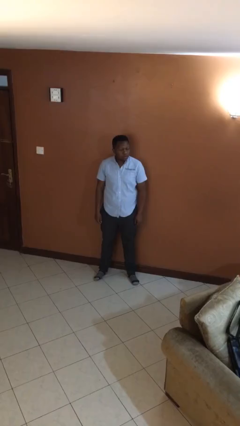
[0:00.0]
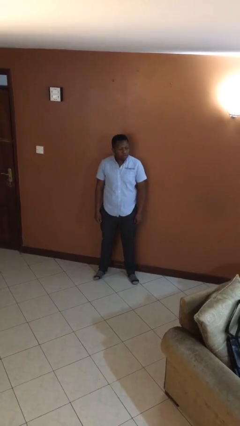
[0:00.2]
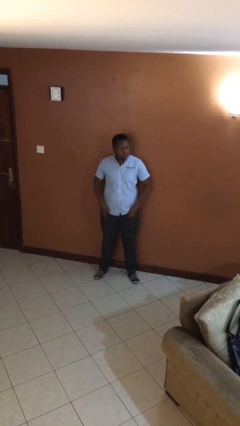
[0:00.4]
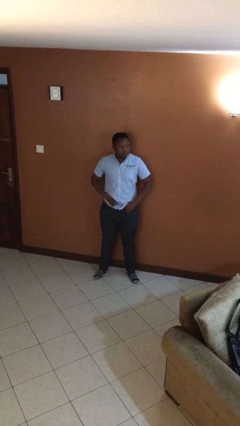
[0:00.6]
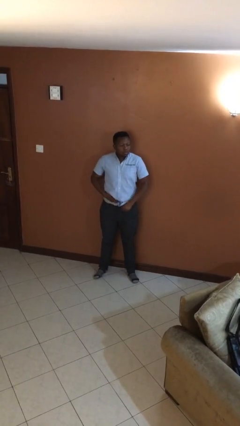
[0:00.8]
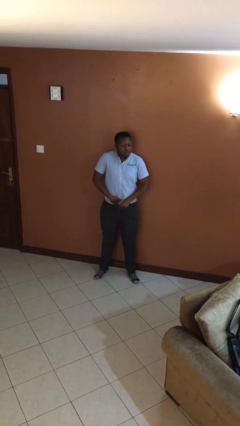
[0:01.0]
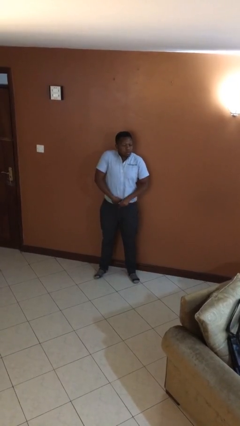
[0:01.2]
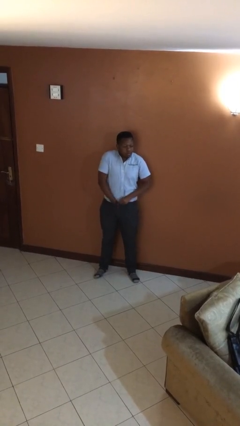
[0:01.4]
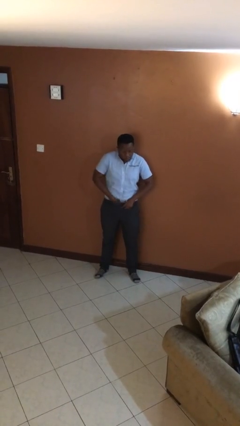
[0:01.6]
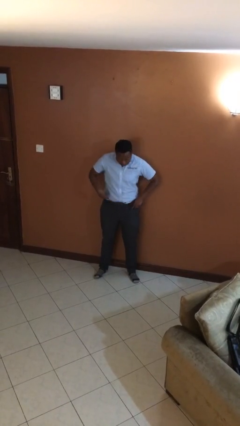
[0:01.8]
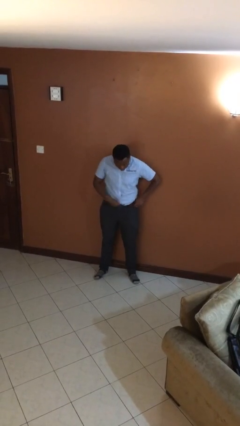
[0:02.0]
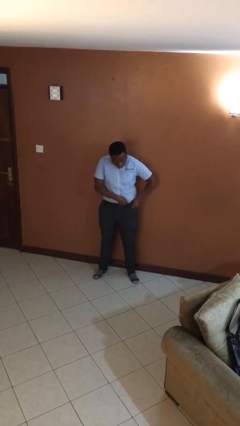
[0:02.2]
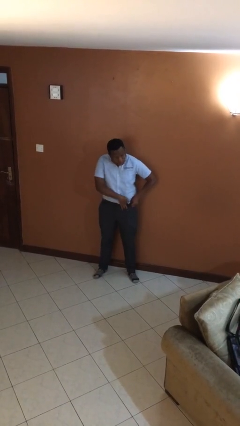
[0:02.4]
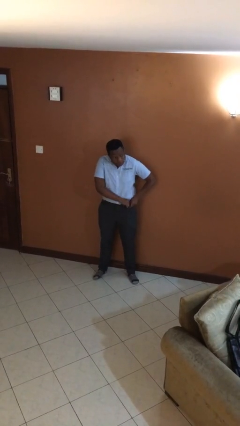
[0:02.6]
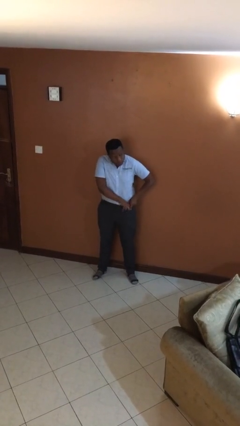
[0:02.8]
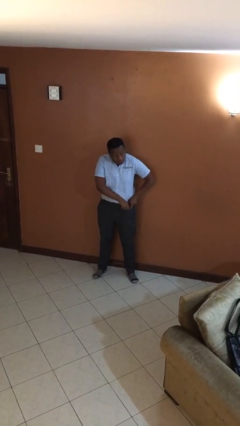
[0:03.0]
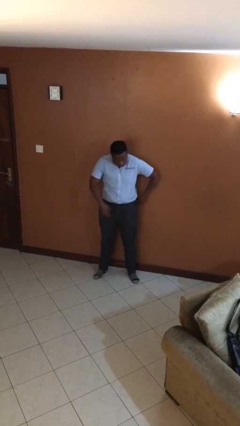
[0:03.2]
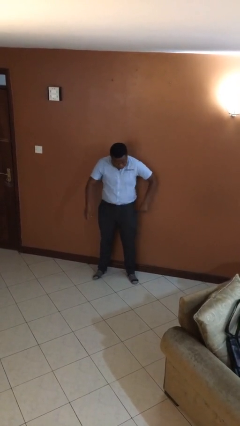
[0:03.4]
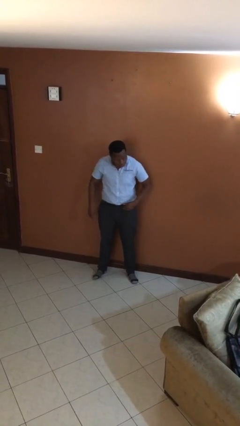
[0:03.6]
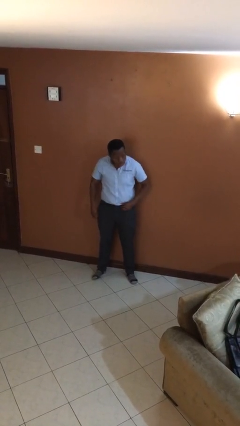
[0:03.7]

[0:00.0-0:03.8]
person tucks in shirt

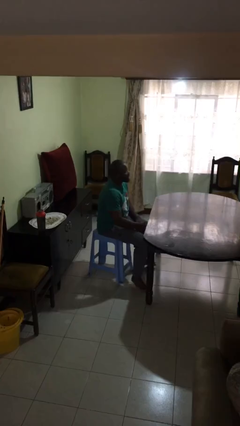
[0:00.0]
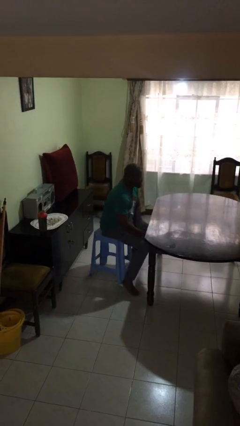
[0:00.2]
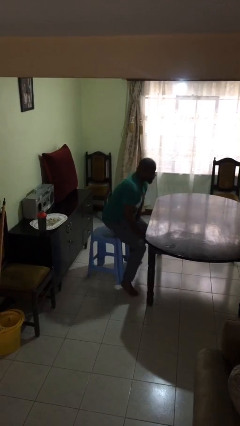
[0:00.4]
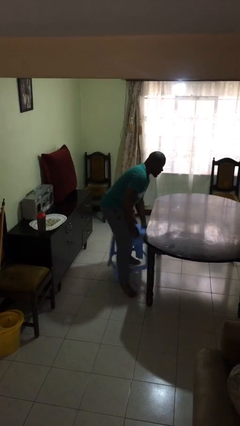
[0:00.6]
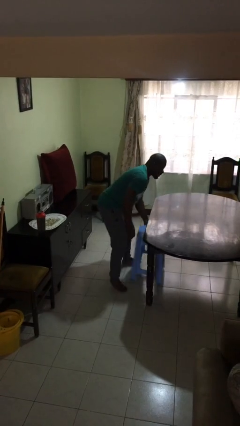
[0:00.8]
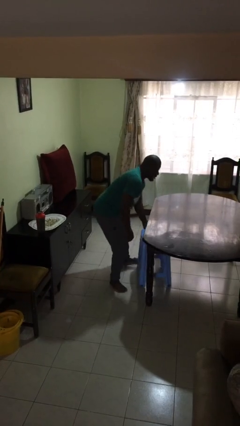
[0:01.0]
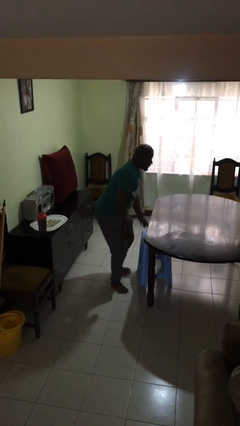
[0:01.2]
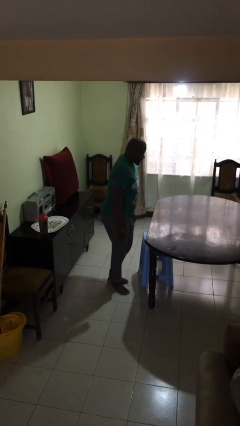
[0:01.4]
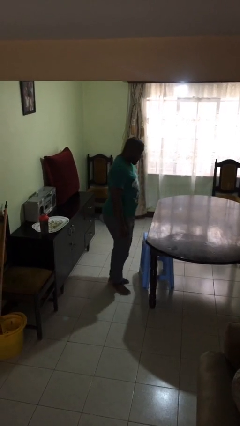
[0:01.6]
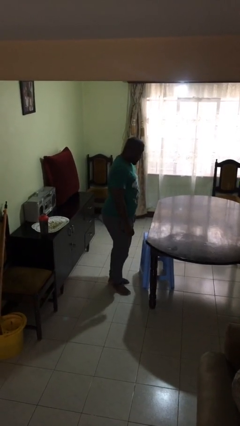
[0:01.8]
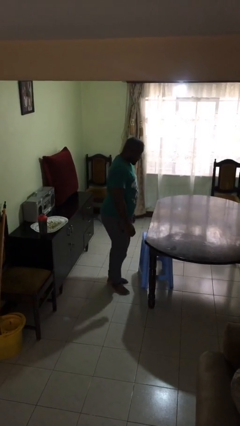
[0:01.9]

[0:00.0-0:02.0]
person stands up

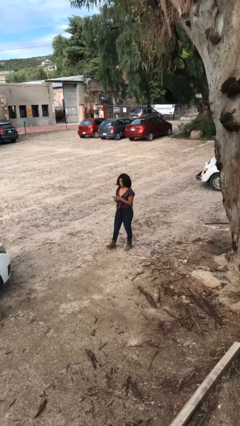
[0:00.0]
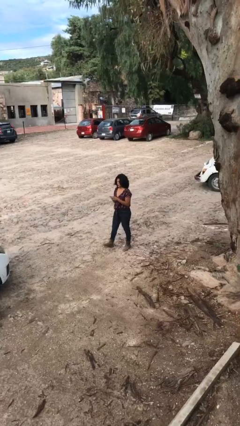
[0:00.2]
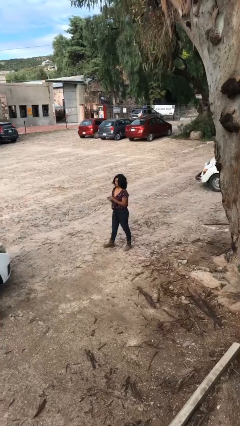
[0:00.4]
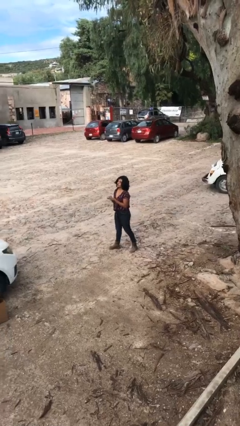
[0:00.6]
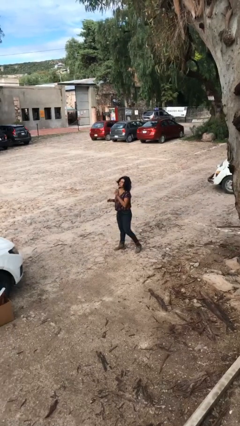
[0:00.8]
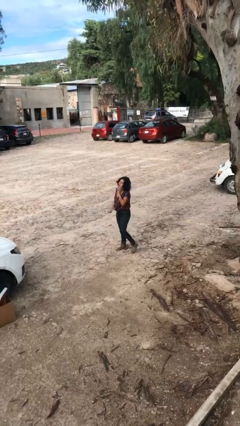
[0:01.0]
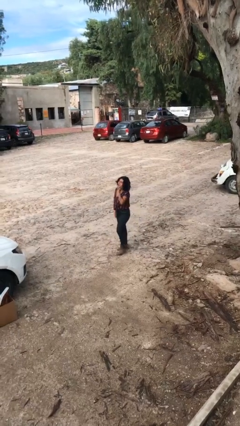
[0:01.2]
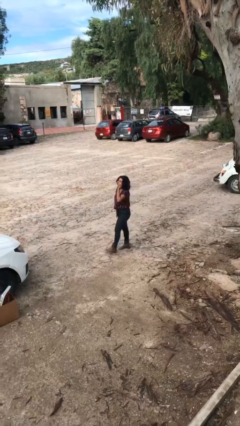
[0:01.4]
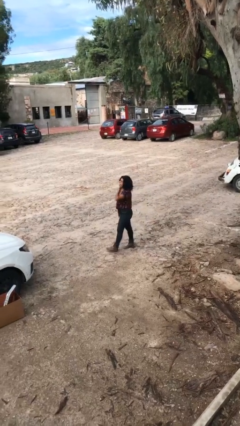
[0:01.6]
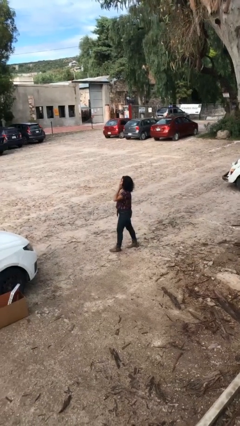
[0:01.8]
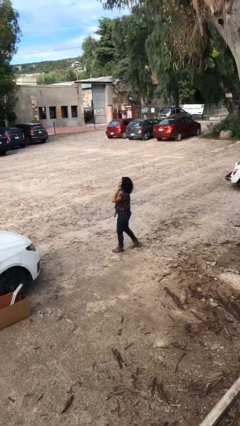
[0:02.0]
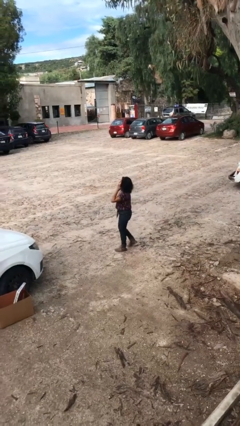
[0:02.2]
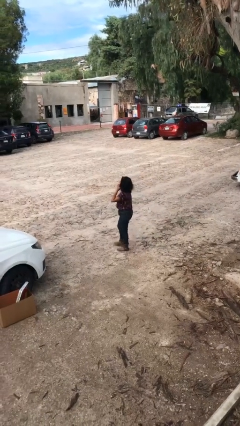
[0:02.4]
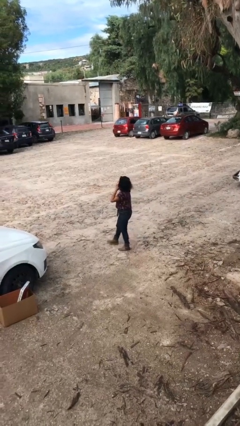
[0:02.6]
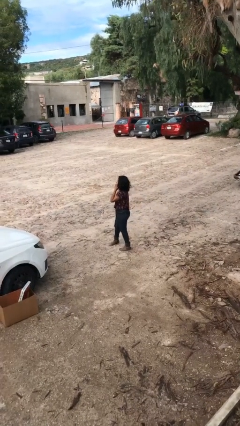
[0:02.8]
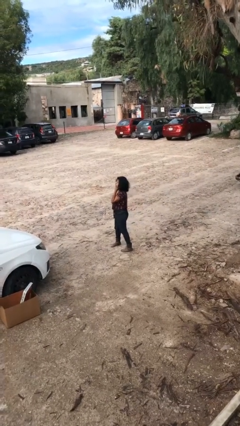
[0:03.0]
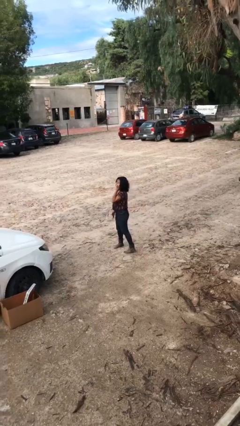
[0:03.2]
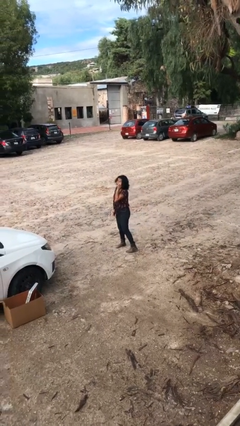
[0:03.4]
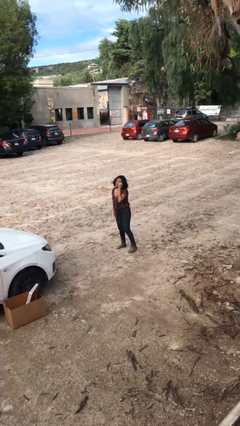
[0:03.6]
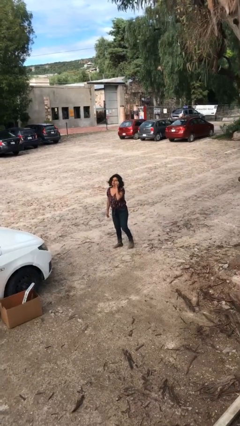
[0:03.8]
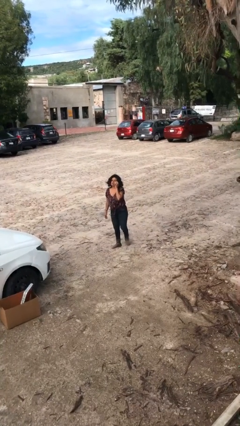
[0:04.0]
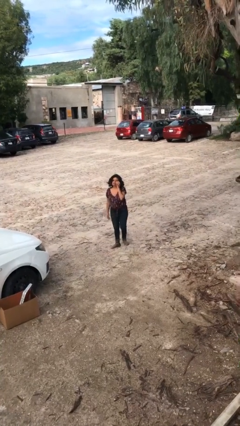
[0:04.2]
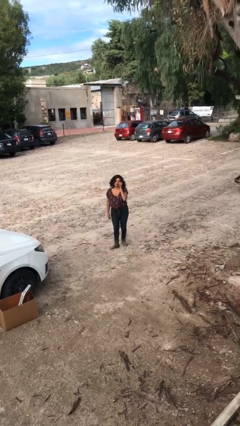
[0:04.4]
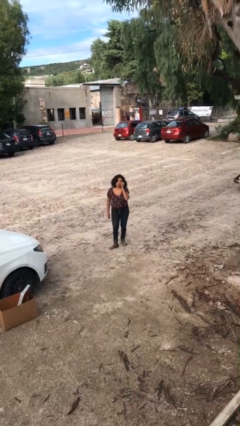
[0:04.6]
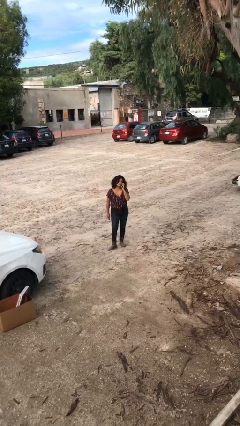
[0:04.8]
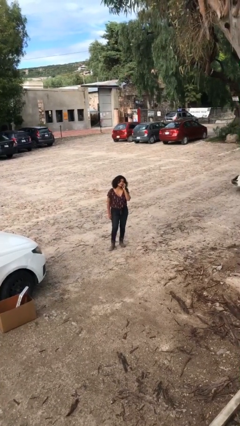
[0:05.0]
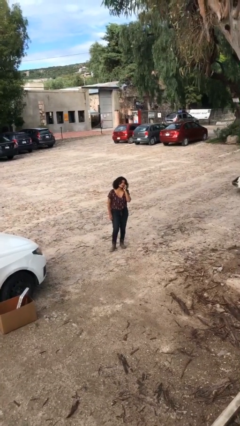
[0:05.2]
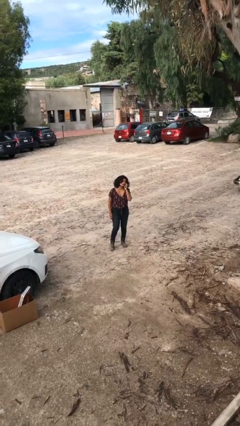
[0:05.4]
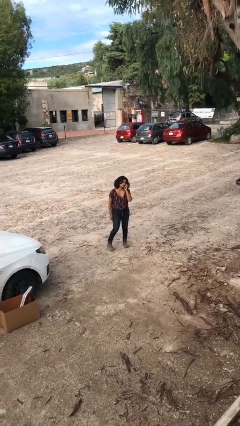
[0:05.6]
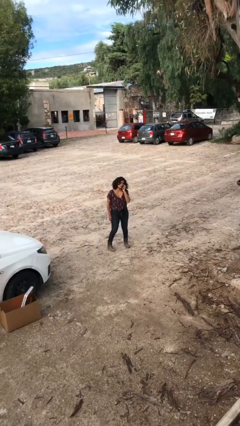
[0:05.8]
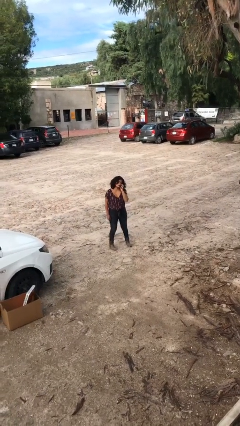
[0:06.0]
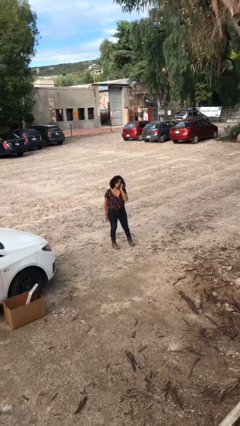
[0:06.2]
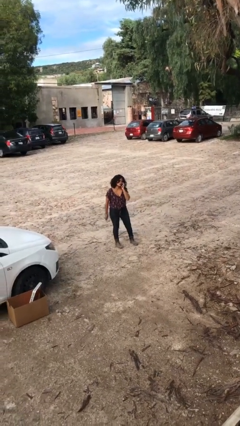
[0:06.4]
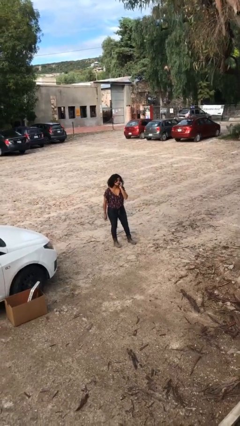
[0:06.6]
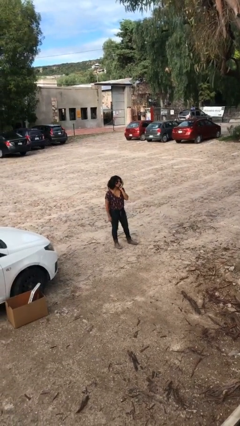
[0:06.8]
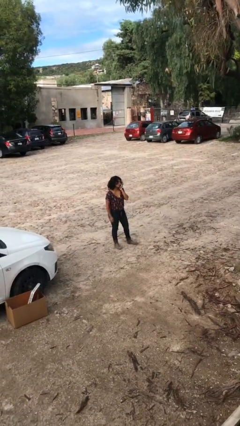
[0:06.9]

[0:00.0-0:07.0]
person talks on phone

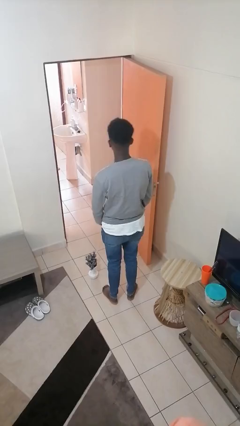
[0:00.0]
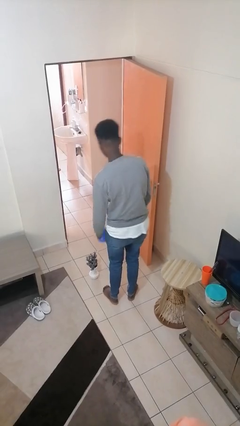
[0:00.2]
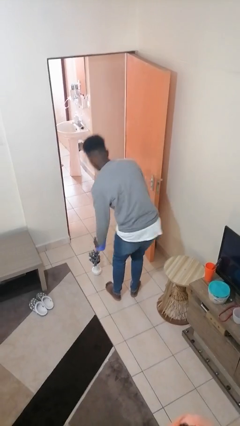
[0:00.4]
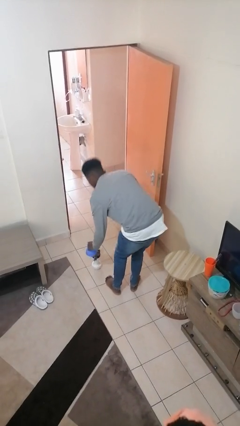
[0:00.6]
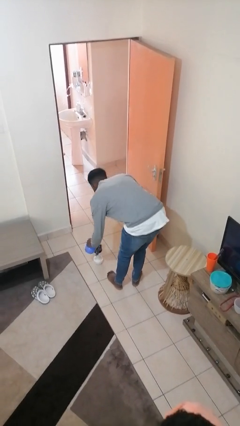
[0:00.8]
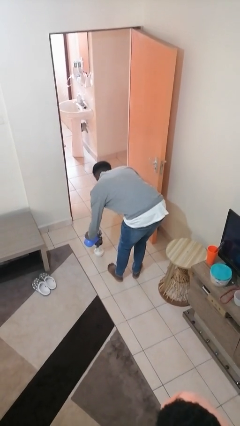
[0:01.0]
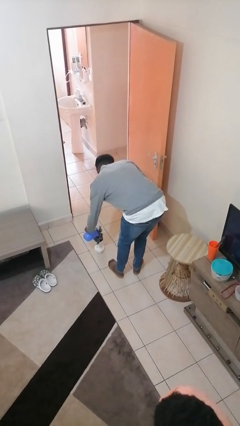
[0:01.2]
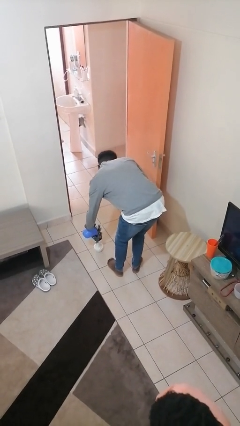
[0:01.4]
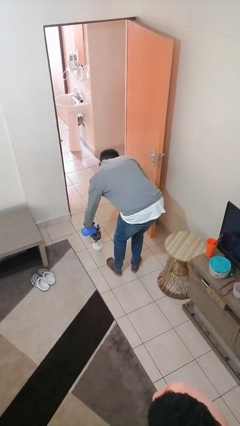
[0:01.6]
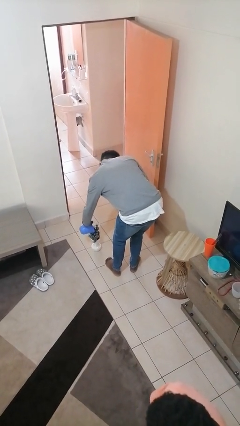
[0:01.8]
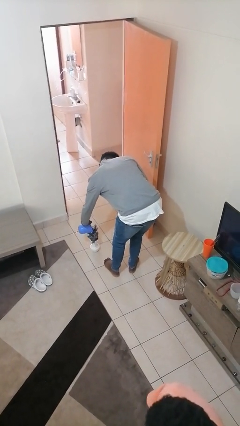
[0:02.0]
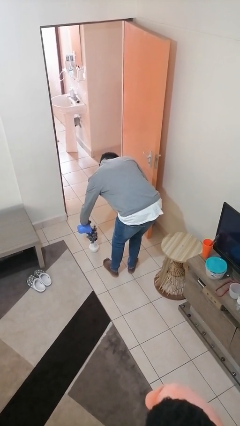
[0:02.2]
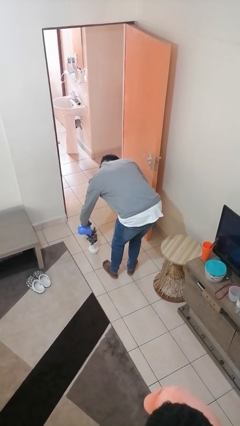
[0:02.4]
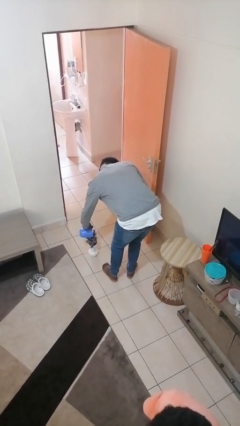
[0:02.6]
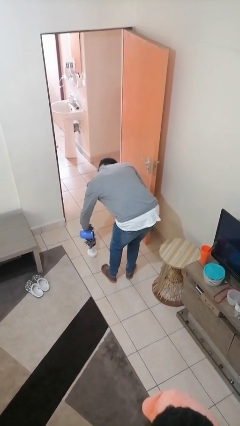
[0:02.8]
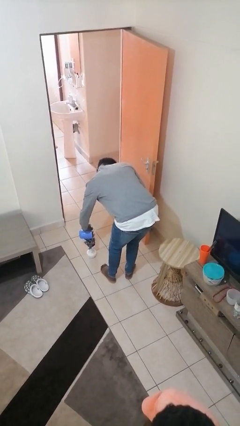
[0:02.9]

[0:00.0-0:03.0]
person waters houseplant

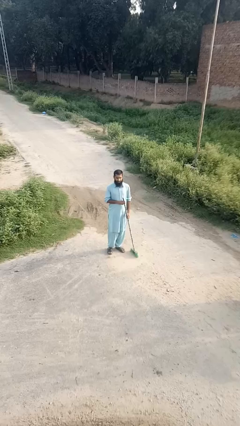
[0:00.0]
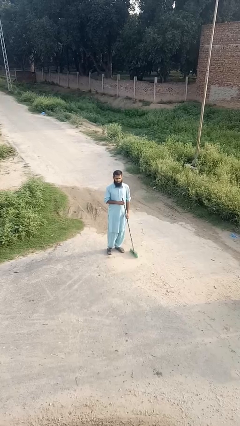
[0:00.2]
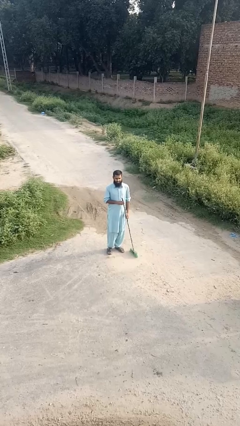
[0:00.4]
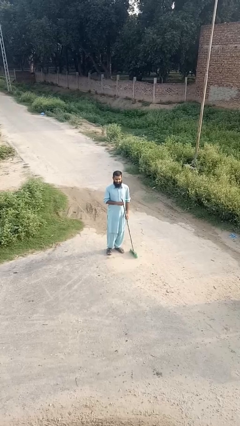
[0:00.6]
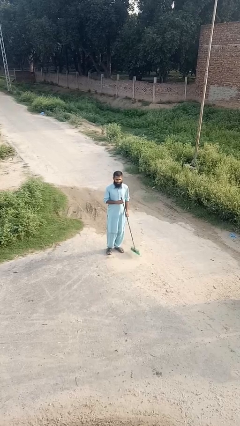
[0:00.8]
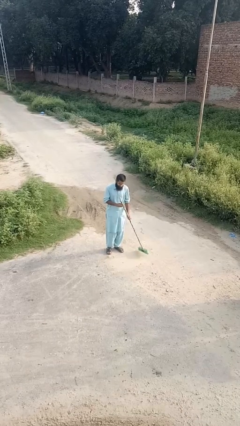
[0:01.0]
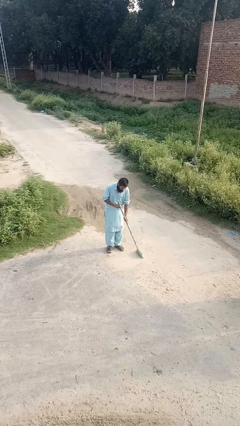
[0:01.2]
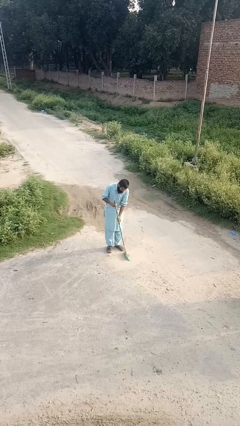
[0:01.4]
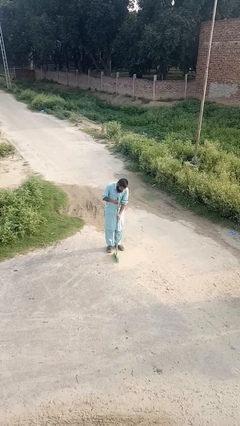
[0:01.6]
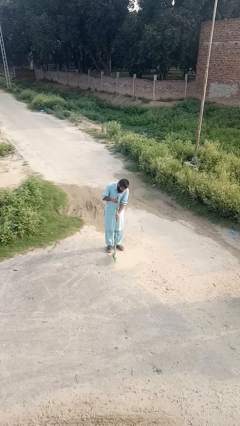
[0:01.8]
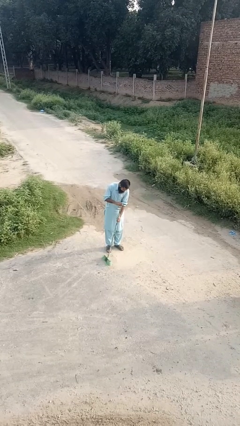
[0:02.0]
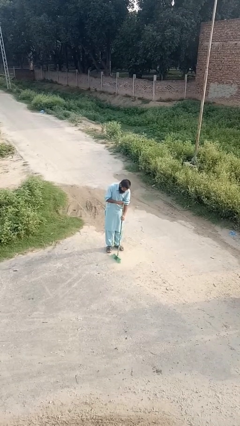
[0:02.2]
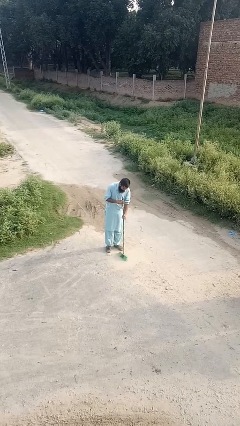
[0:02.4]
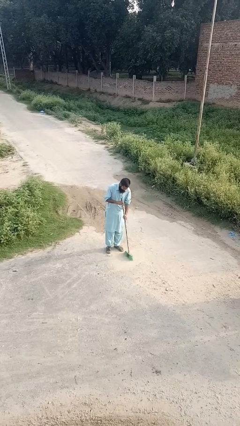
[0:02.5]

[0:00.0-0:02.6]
person sweeps floor
